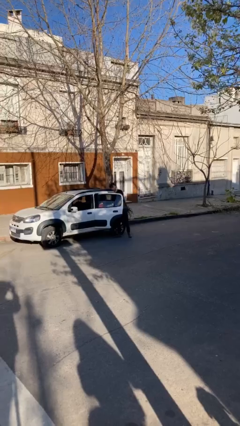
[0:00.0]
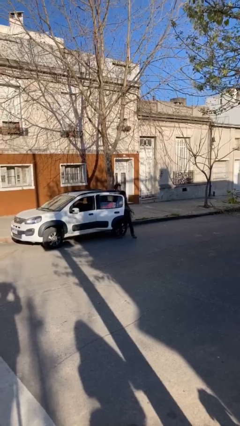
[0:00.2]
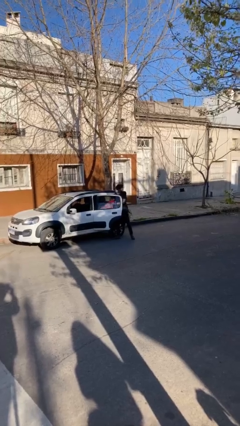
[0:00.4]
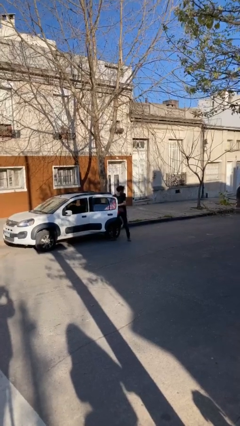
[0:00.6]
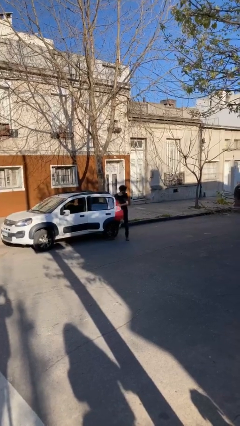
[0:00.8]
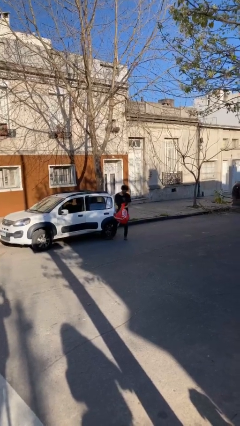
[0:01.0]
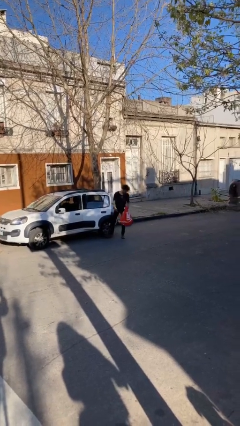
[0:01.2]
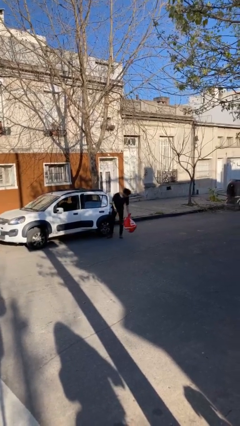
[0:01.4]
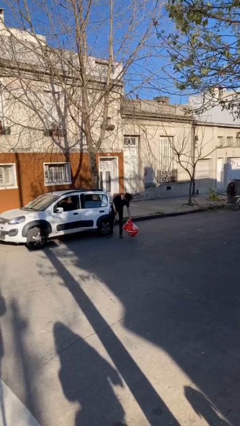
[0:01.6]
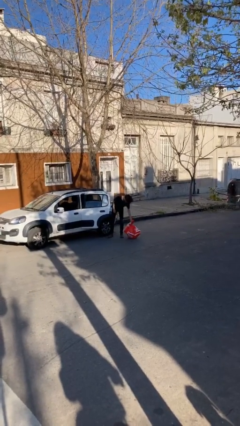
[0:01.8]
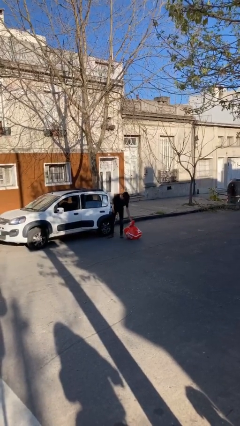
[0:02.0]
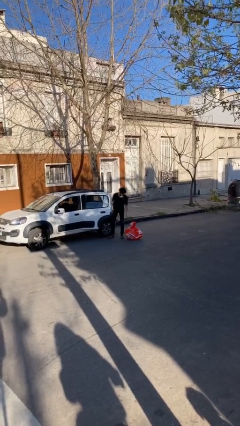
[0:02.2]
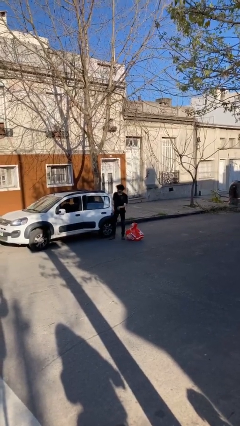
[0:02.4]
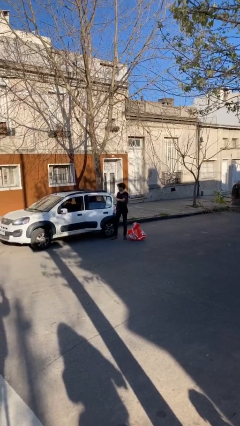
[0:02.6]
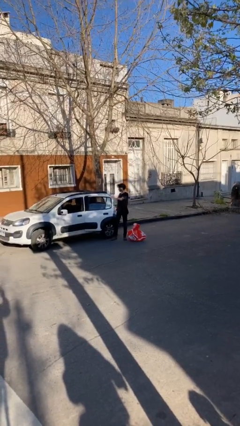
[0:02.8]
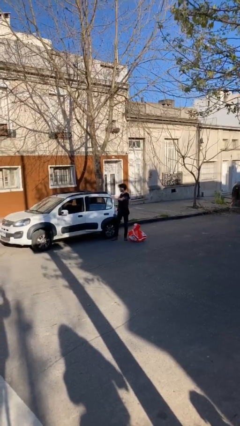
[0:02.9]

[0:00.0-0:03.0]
person unloads car

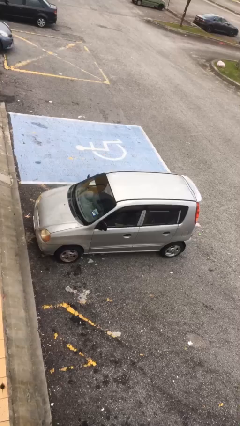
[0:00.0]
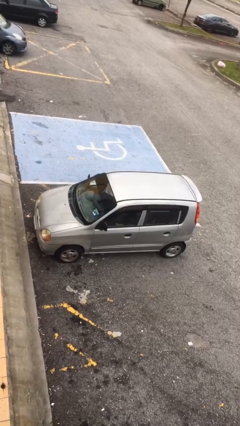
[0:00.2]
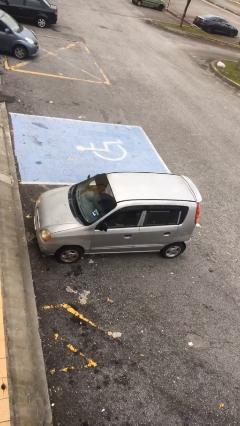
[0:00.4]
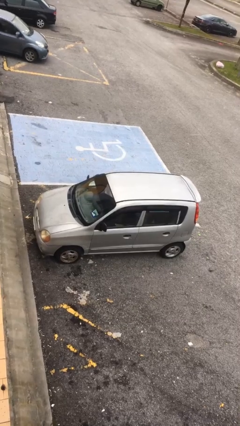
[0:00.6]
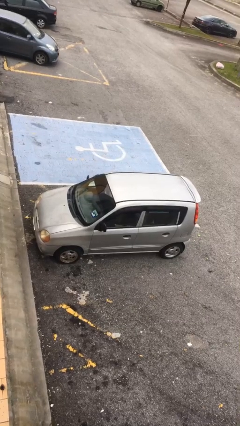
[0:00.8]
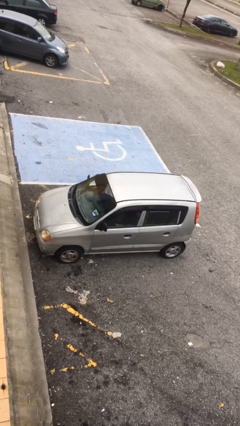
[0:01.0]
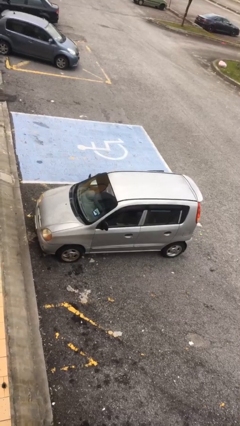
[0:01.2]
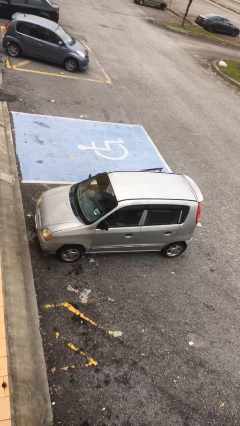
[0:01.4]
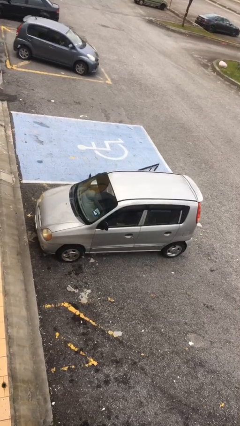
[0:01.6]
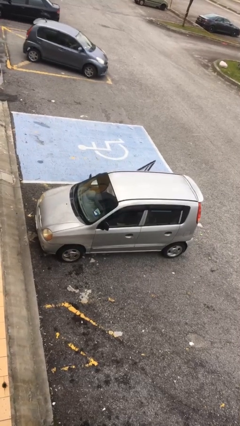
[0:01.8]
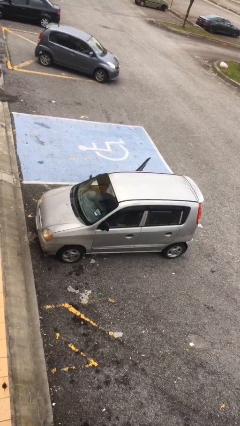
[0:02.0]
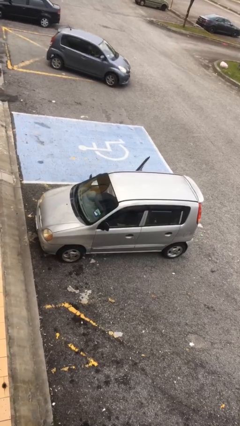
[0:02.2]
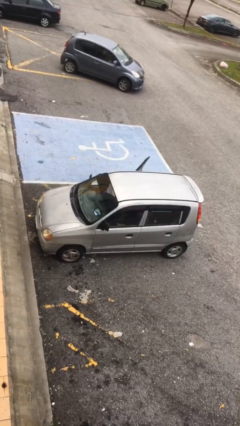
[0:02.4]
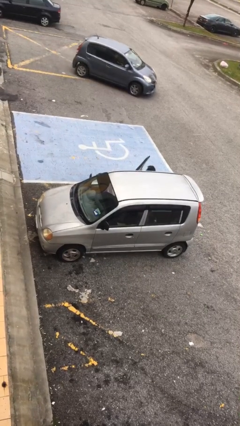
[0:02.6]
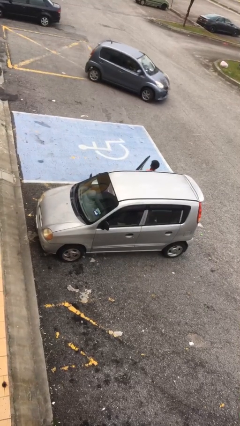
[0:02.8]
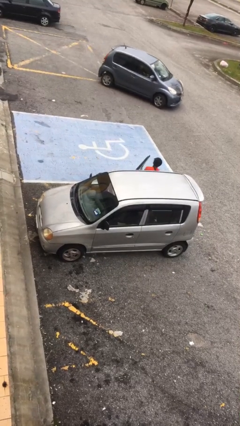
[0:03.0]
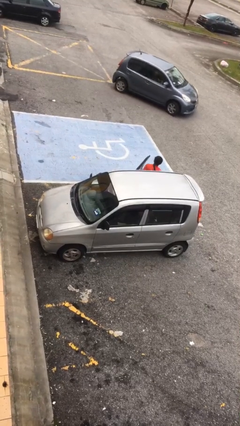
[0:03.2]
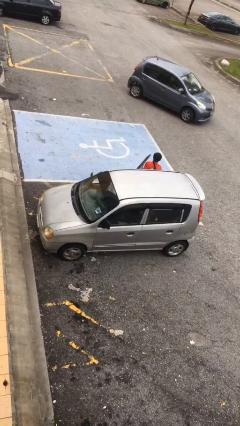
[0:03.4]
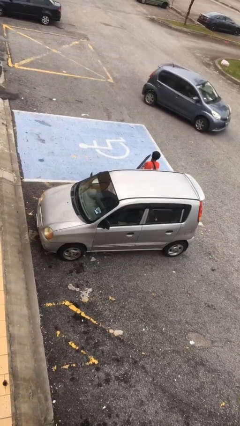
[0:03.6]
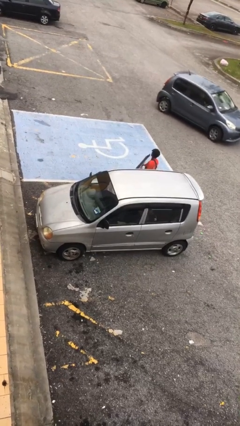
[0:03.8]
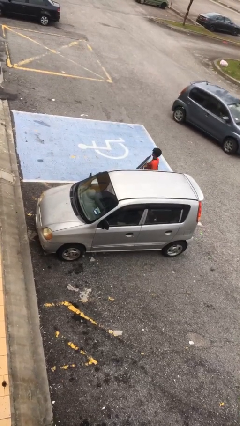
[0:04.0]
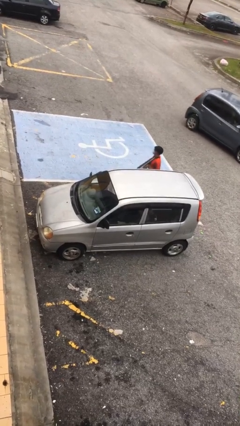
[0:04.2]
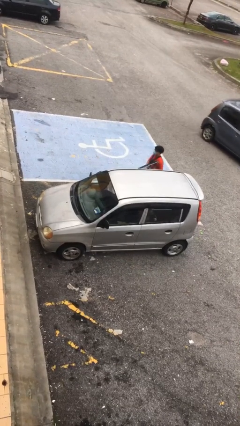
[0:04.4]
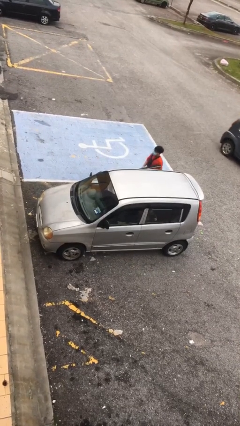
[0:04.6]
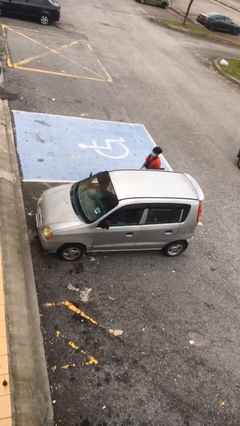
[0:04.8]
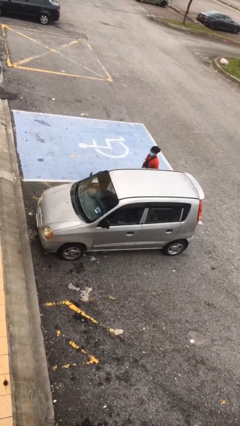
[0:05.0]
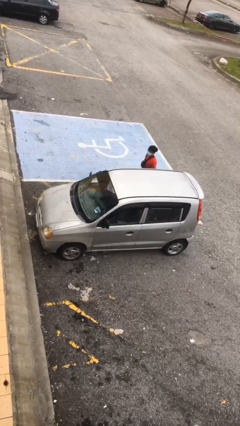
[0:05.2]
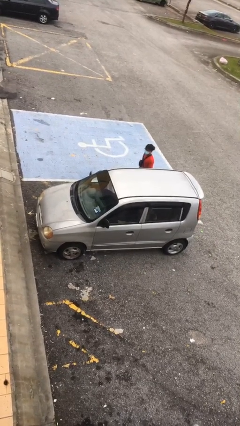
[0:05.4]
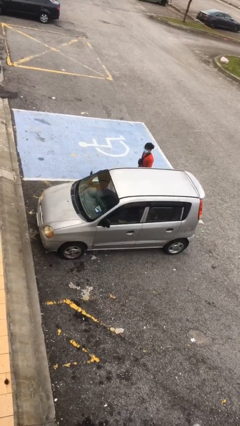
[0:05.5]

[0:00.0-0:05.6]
car drops off person

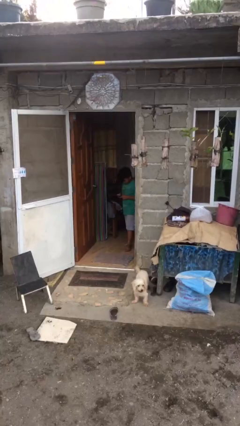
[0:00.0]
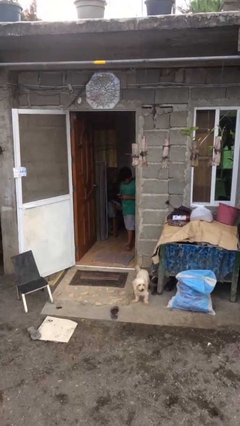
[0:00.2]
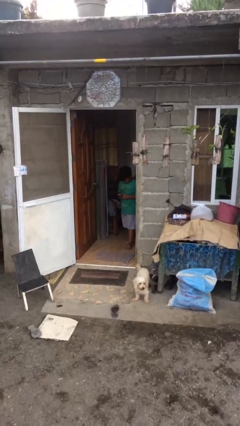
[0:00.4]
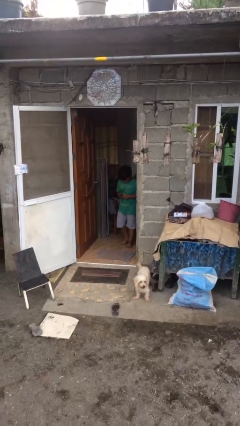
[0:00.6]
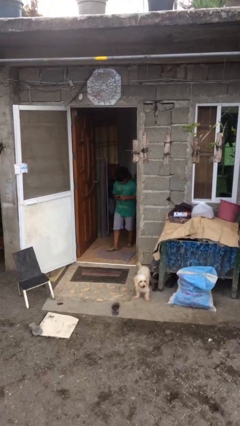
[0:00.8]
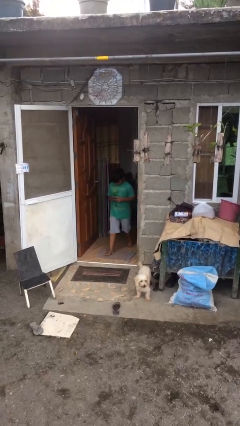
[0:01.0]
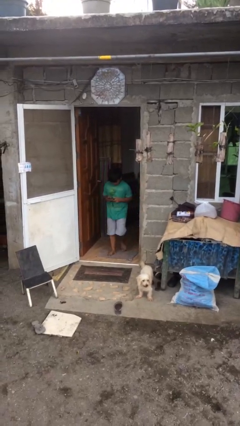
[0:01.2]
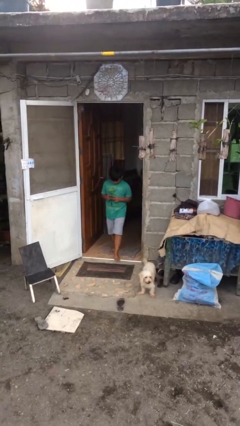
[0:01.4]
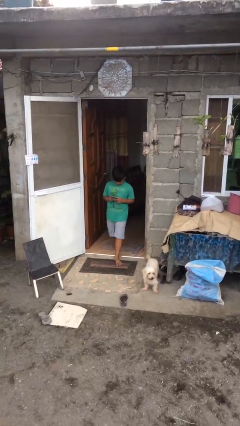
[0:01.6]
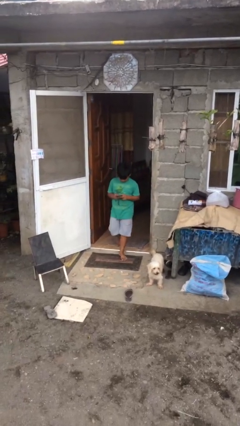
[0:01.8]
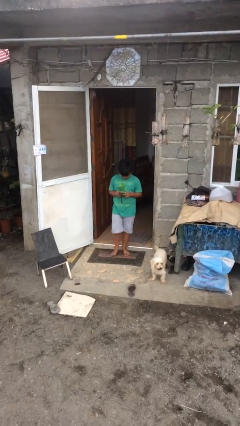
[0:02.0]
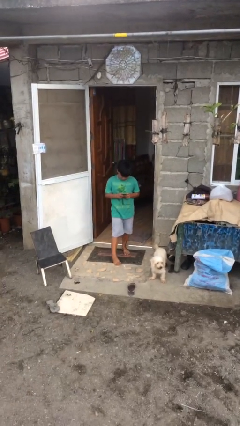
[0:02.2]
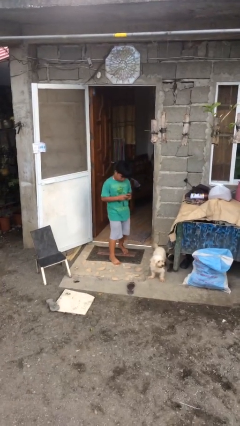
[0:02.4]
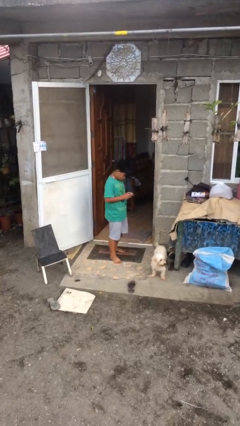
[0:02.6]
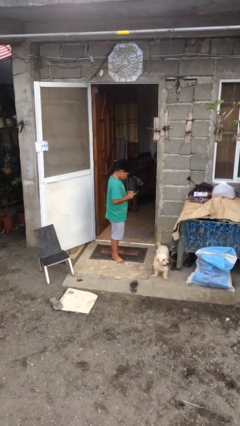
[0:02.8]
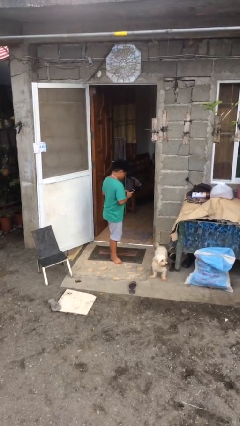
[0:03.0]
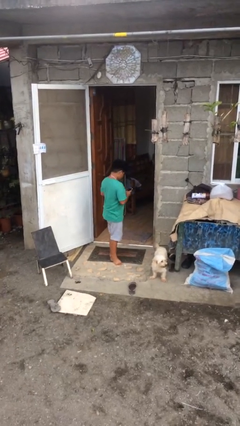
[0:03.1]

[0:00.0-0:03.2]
person enters scene through structure

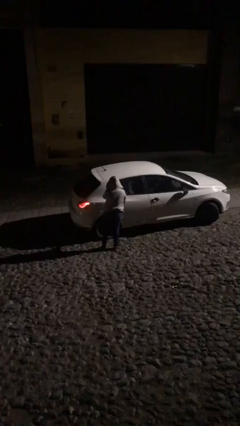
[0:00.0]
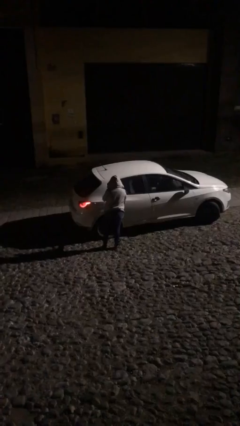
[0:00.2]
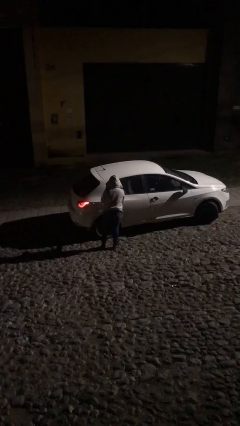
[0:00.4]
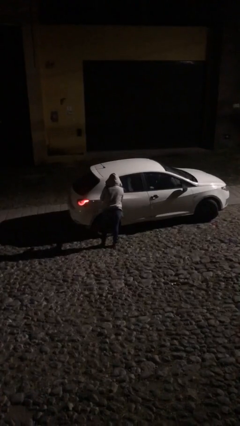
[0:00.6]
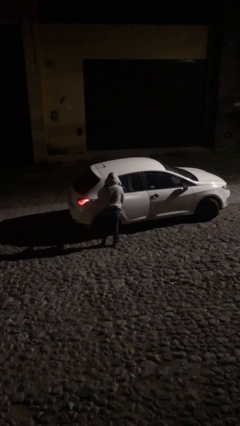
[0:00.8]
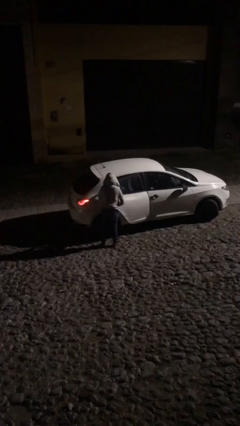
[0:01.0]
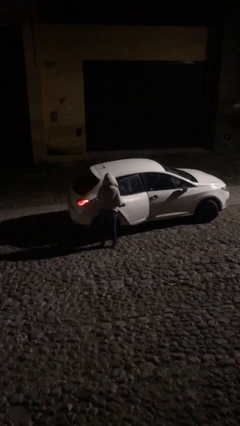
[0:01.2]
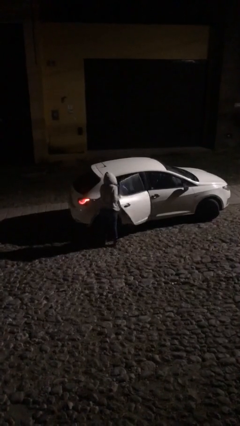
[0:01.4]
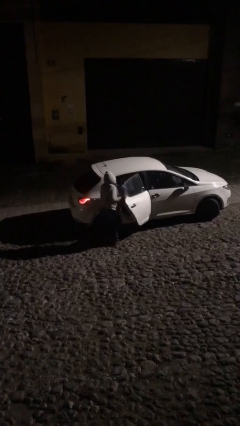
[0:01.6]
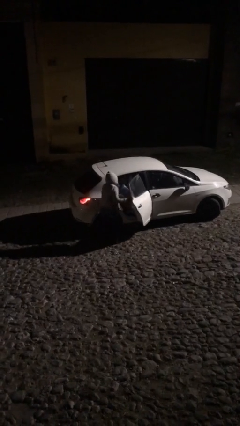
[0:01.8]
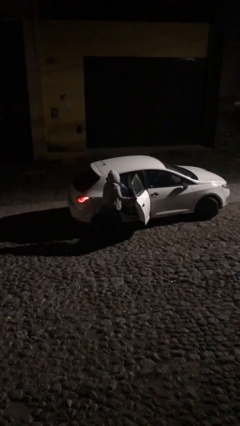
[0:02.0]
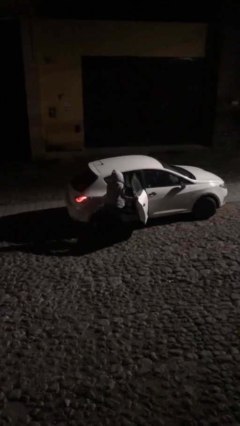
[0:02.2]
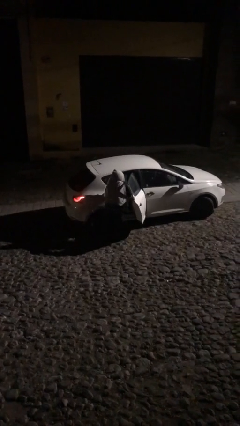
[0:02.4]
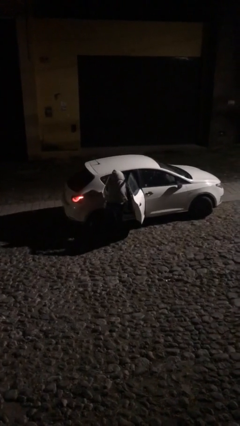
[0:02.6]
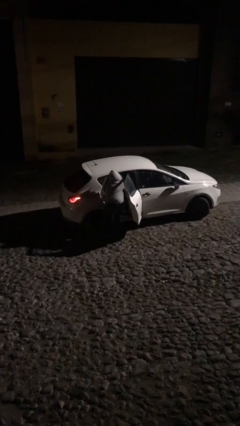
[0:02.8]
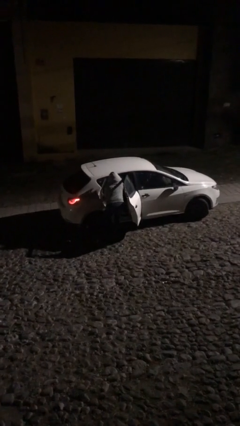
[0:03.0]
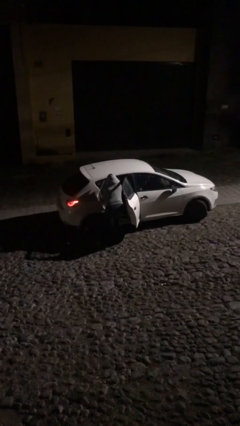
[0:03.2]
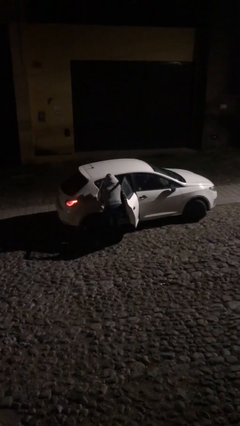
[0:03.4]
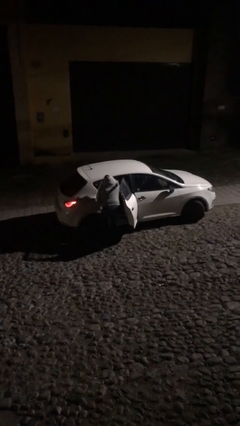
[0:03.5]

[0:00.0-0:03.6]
person opens car door

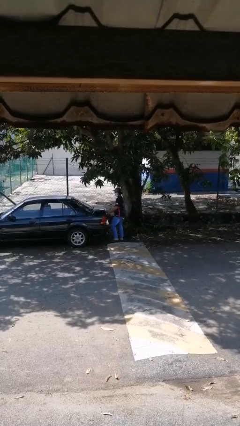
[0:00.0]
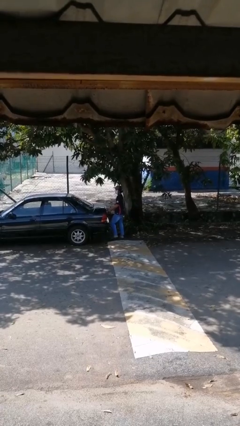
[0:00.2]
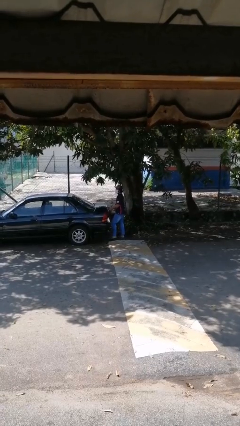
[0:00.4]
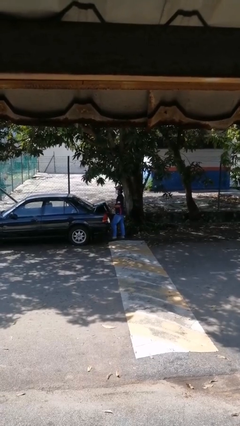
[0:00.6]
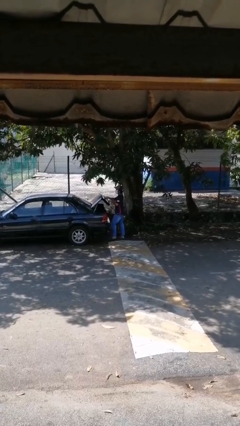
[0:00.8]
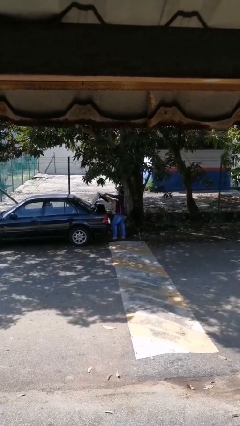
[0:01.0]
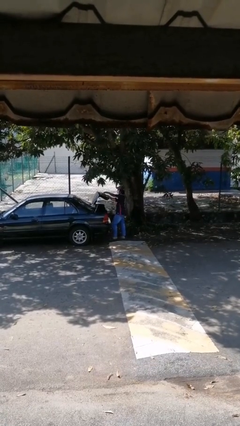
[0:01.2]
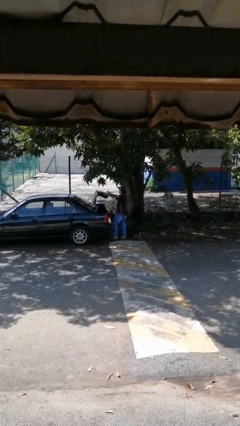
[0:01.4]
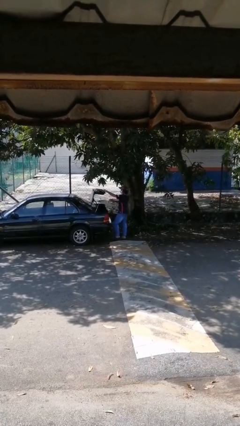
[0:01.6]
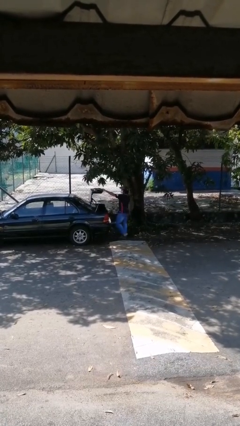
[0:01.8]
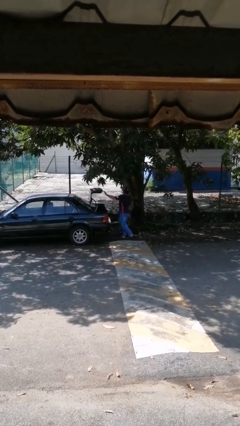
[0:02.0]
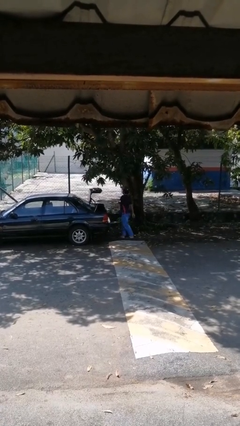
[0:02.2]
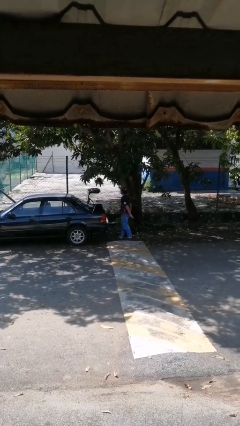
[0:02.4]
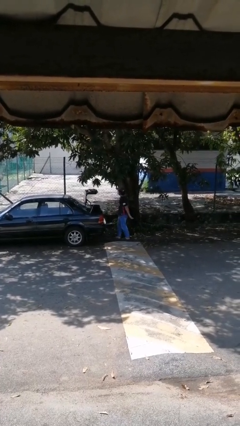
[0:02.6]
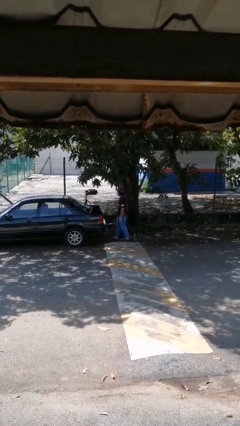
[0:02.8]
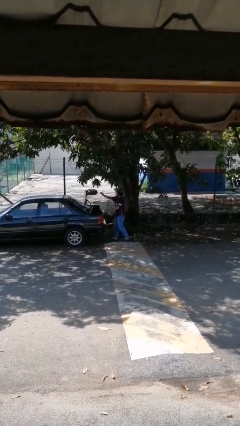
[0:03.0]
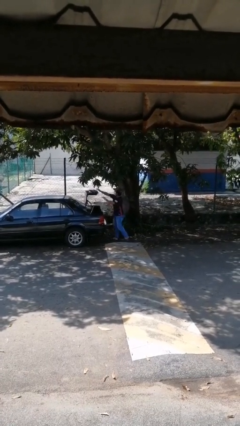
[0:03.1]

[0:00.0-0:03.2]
person opens car trunk
